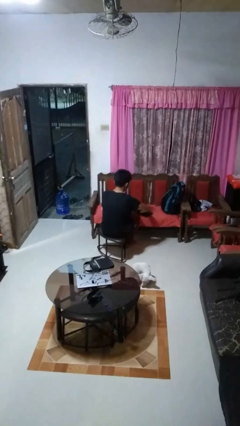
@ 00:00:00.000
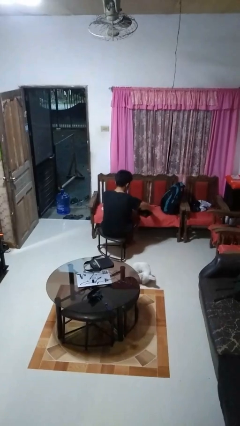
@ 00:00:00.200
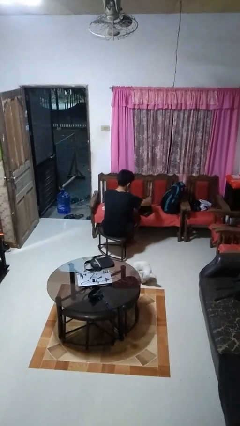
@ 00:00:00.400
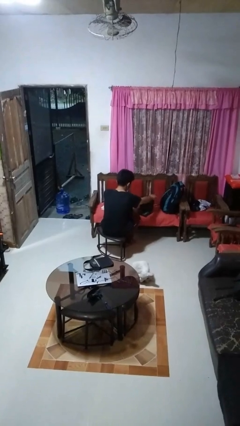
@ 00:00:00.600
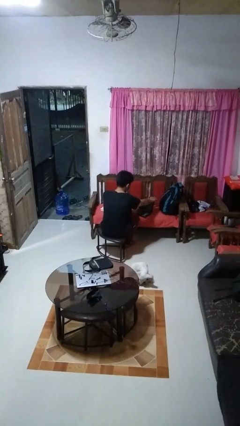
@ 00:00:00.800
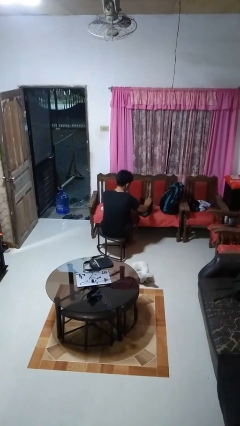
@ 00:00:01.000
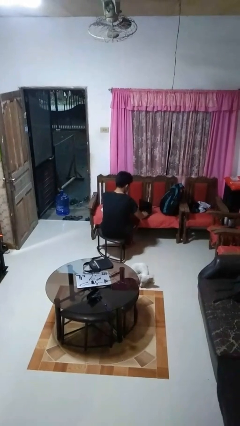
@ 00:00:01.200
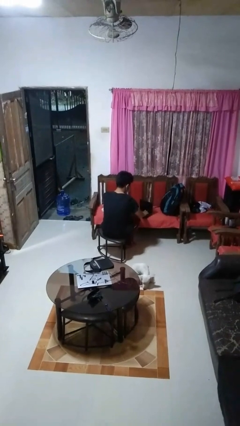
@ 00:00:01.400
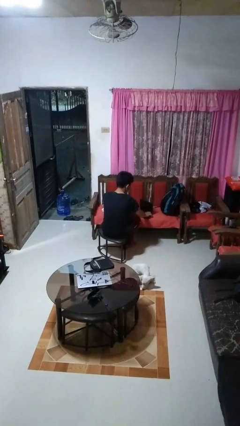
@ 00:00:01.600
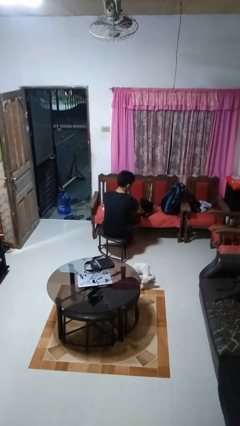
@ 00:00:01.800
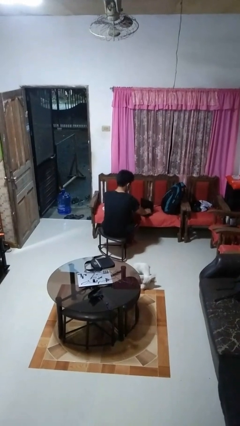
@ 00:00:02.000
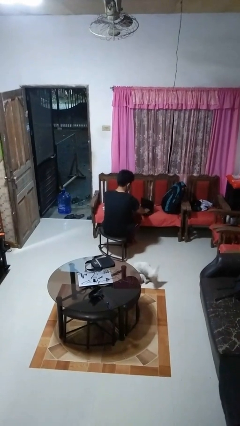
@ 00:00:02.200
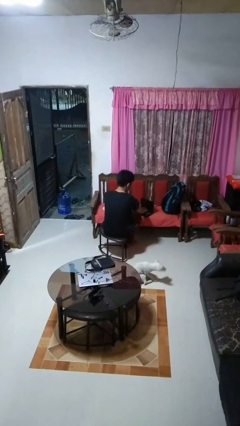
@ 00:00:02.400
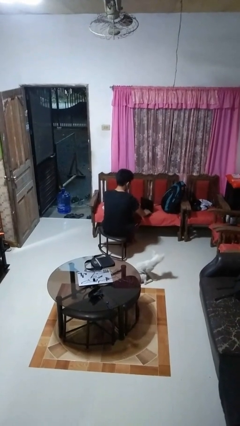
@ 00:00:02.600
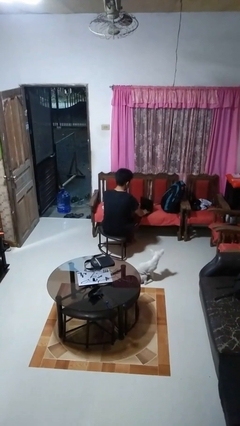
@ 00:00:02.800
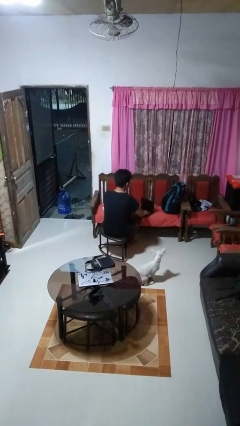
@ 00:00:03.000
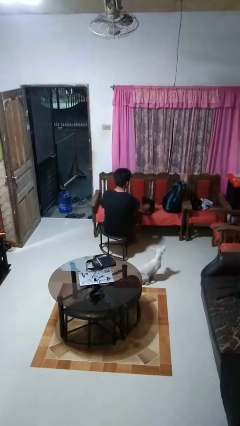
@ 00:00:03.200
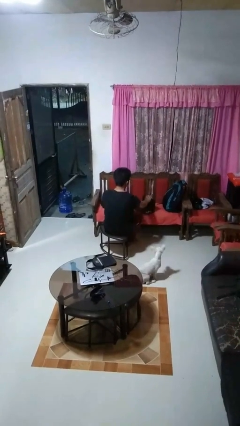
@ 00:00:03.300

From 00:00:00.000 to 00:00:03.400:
person opens laptop

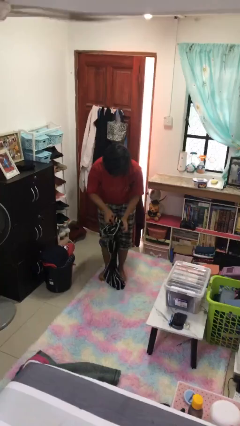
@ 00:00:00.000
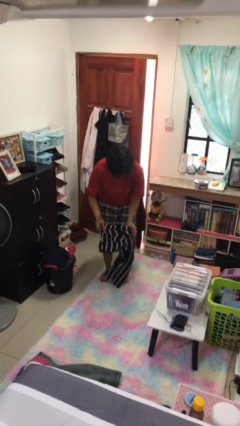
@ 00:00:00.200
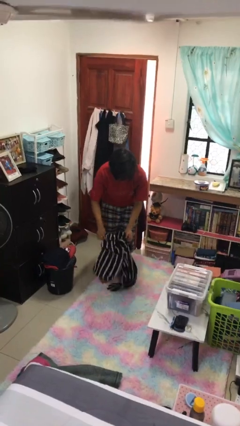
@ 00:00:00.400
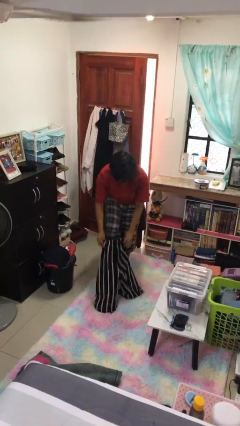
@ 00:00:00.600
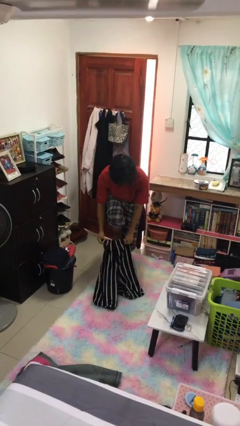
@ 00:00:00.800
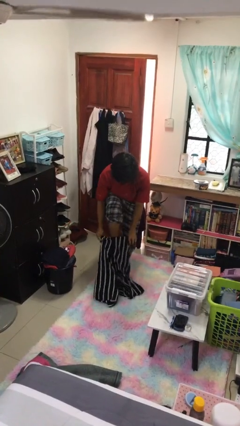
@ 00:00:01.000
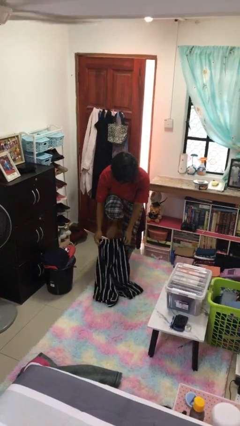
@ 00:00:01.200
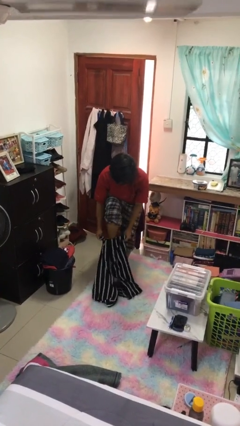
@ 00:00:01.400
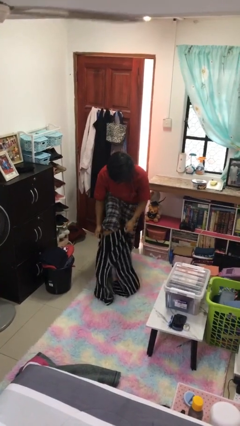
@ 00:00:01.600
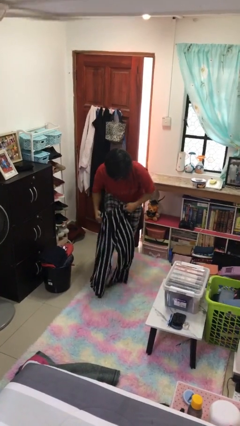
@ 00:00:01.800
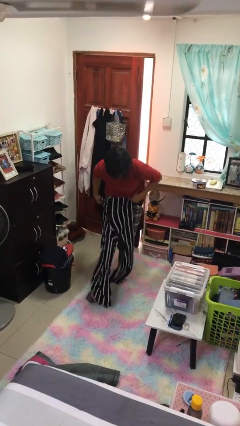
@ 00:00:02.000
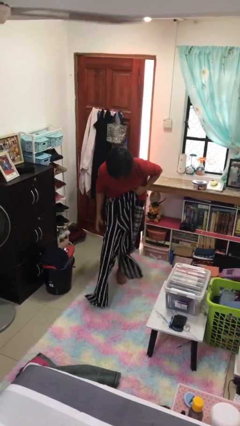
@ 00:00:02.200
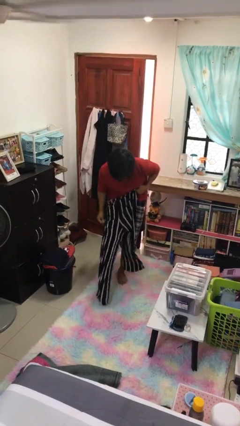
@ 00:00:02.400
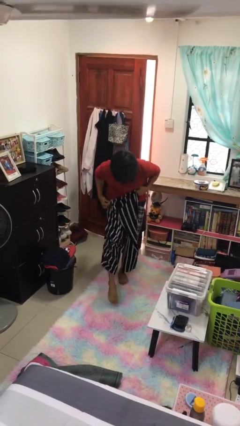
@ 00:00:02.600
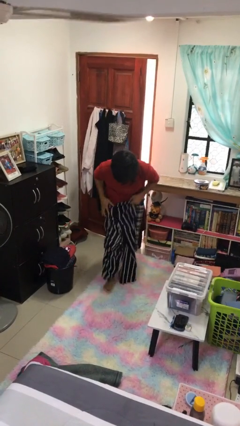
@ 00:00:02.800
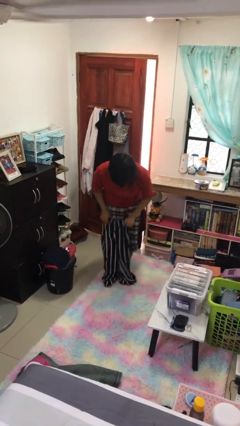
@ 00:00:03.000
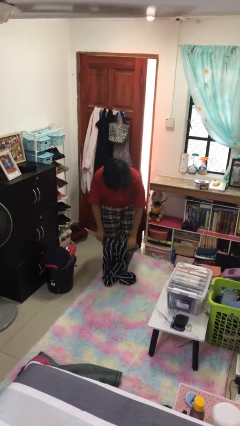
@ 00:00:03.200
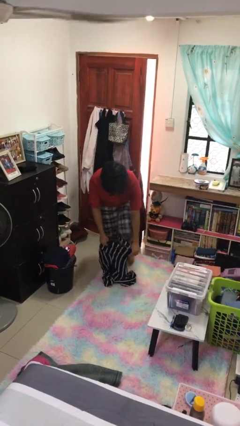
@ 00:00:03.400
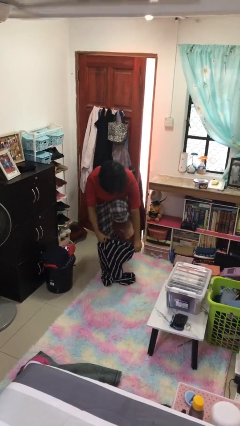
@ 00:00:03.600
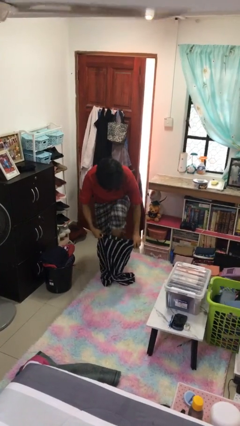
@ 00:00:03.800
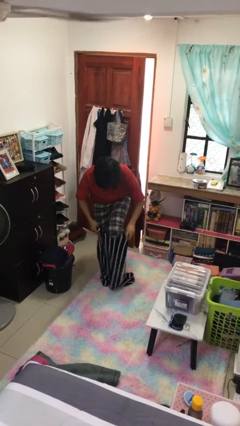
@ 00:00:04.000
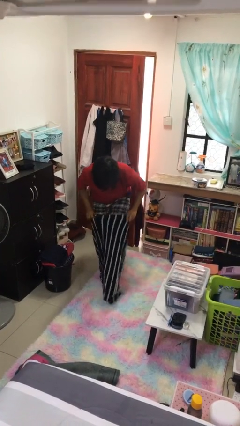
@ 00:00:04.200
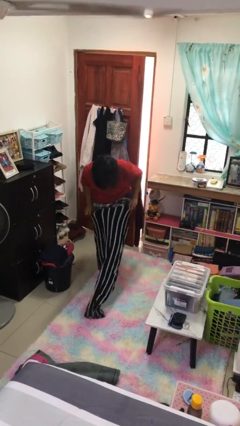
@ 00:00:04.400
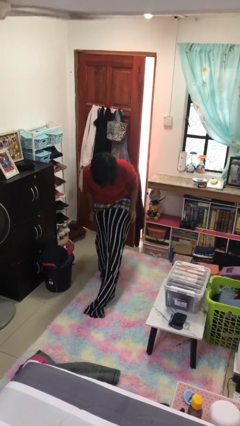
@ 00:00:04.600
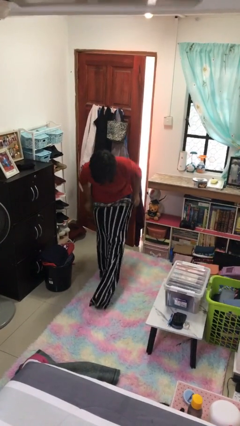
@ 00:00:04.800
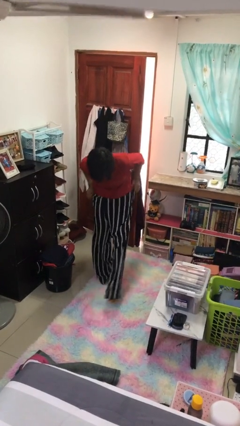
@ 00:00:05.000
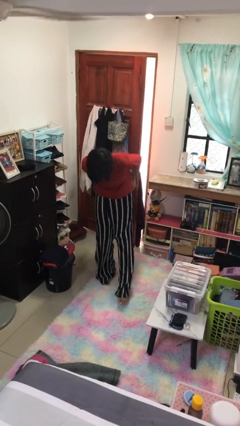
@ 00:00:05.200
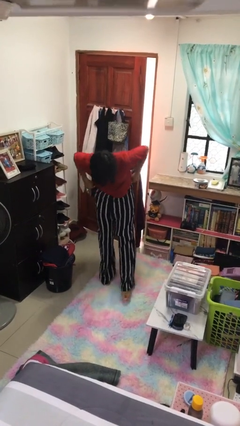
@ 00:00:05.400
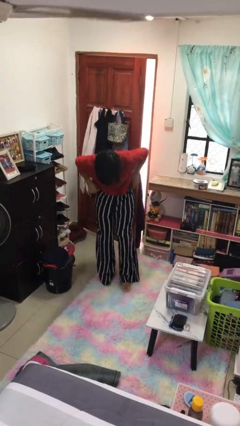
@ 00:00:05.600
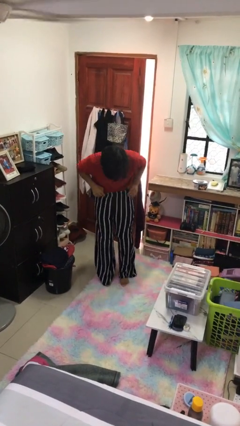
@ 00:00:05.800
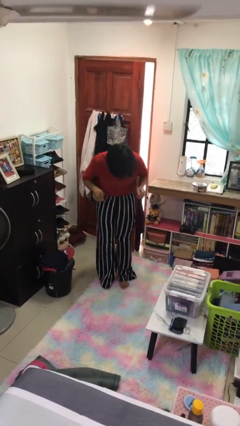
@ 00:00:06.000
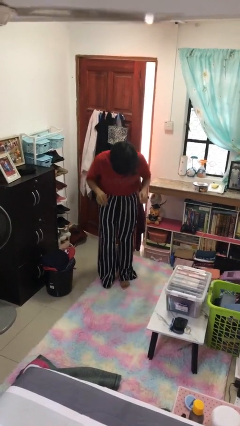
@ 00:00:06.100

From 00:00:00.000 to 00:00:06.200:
person puts on pants

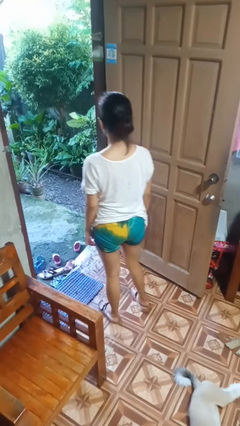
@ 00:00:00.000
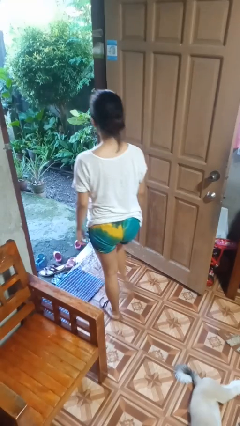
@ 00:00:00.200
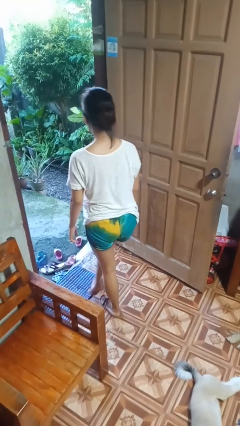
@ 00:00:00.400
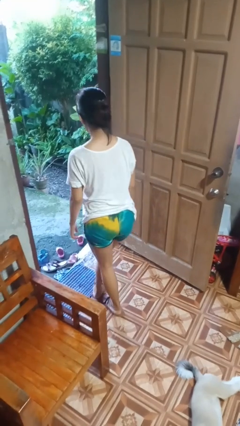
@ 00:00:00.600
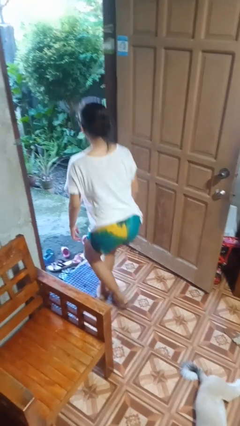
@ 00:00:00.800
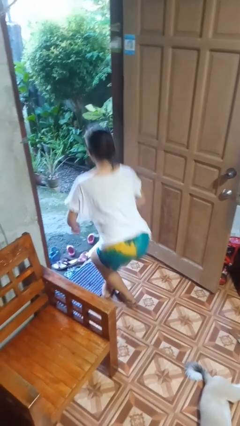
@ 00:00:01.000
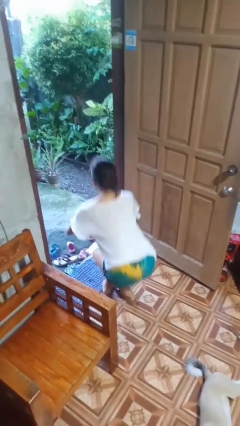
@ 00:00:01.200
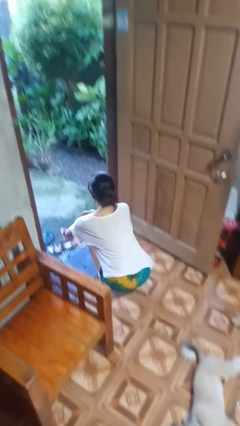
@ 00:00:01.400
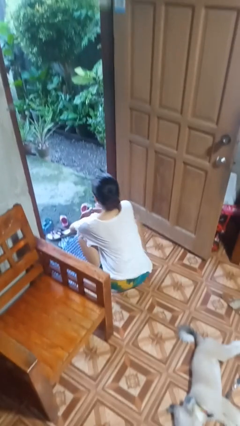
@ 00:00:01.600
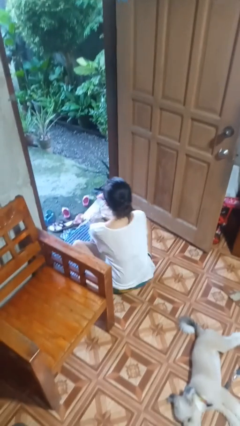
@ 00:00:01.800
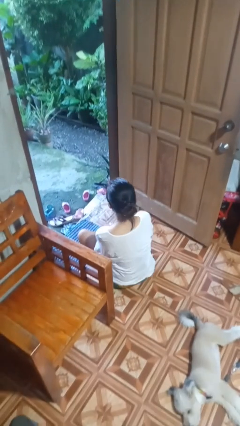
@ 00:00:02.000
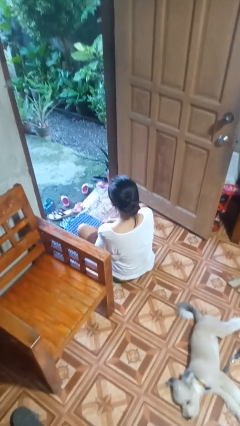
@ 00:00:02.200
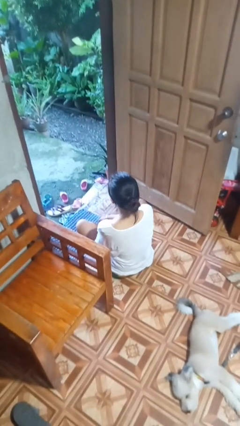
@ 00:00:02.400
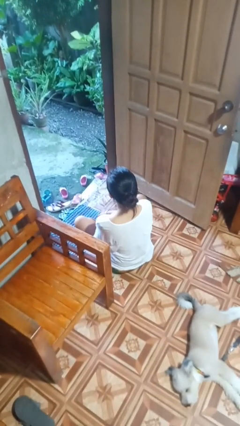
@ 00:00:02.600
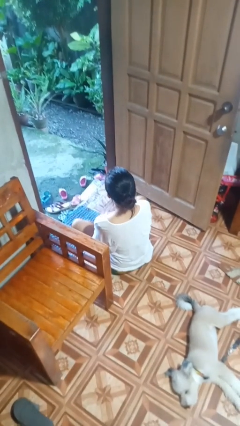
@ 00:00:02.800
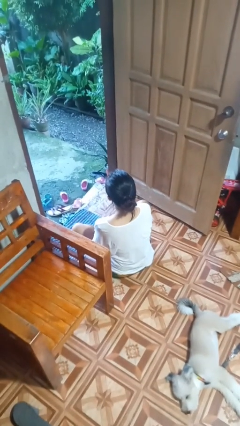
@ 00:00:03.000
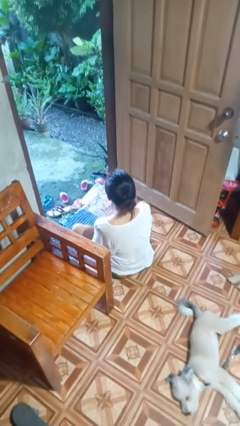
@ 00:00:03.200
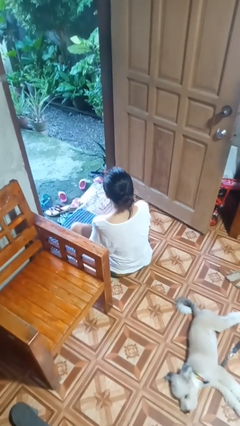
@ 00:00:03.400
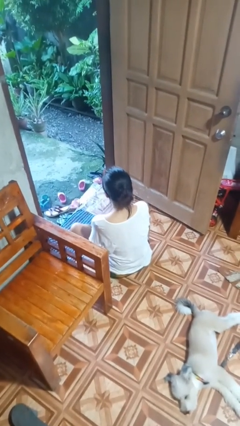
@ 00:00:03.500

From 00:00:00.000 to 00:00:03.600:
person sits crisscross

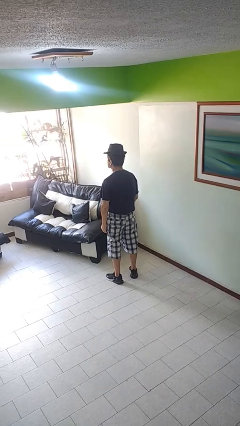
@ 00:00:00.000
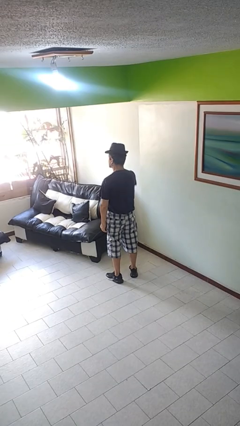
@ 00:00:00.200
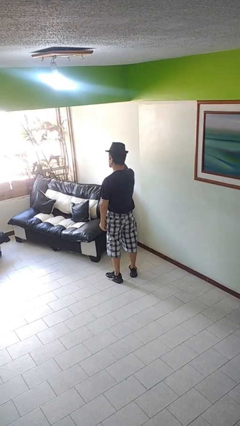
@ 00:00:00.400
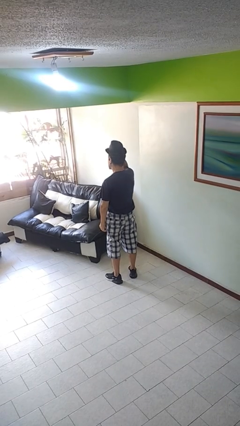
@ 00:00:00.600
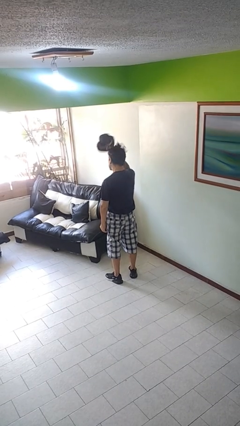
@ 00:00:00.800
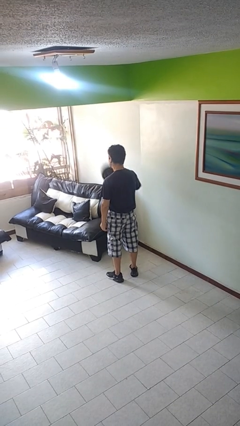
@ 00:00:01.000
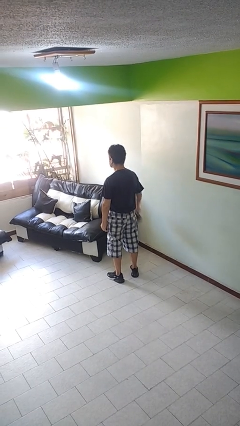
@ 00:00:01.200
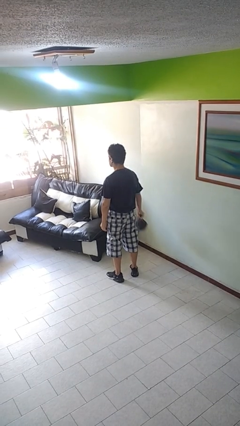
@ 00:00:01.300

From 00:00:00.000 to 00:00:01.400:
person takes off hat

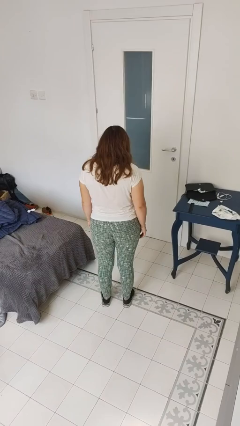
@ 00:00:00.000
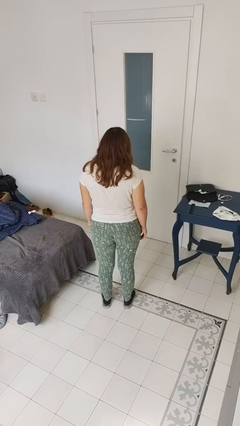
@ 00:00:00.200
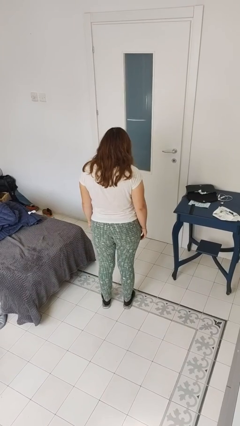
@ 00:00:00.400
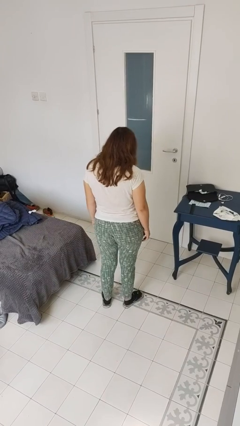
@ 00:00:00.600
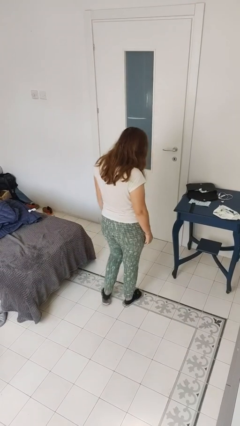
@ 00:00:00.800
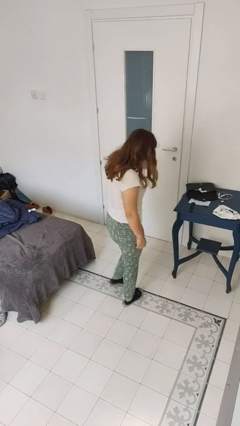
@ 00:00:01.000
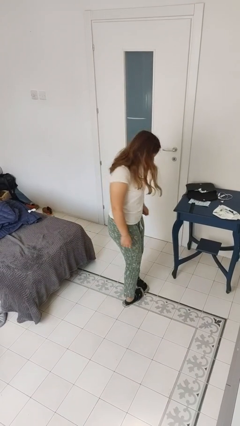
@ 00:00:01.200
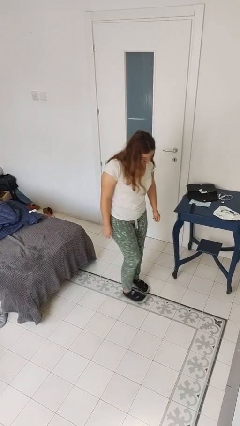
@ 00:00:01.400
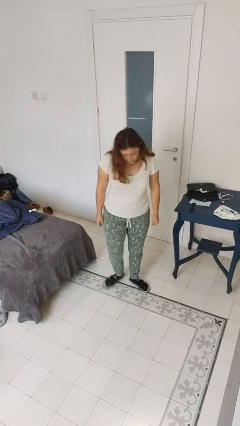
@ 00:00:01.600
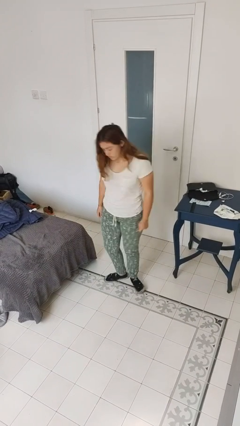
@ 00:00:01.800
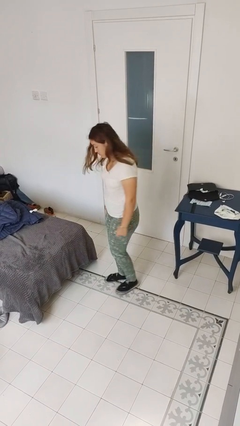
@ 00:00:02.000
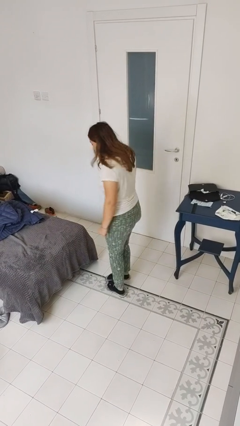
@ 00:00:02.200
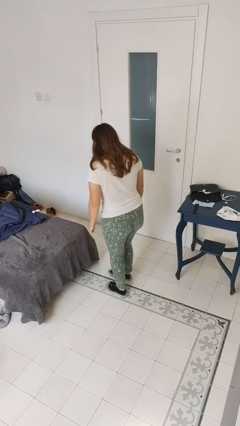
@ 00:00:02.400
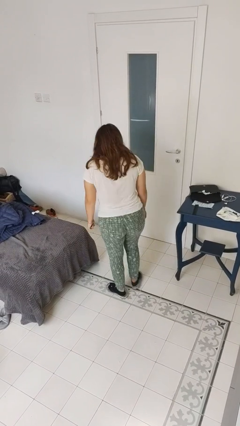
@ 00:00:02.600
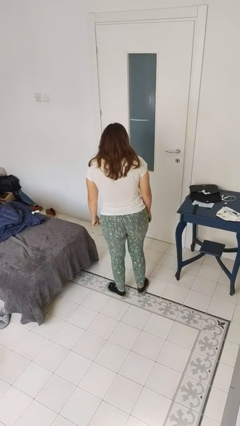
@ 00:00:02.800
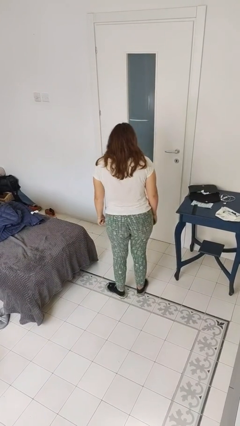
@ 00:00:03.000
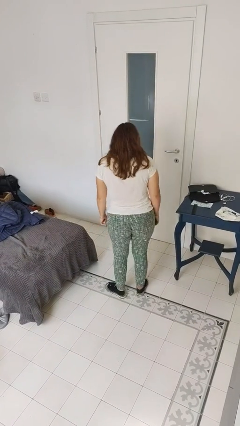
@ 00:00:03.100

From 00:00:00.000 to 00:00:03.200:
person twirls
